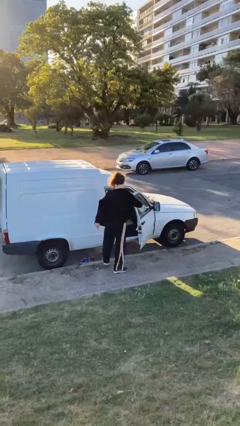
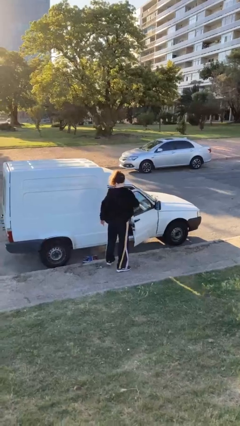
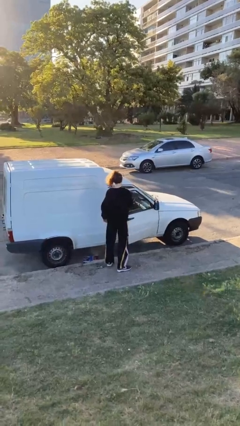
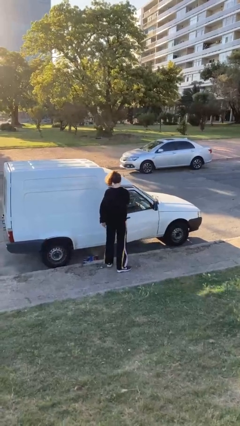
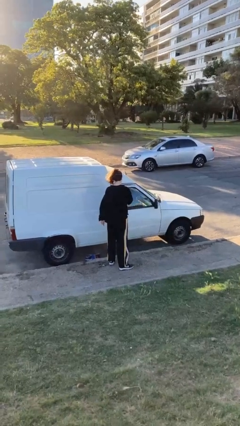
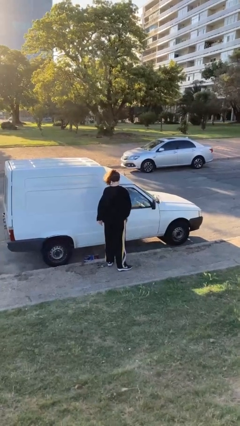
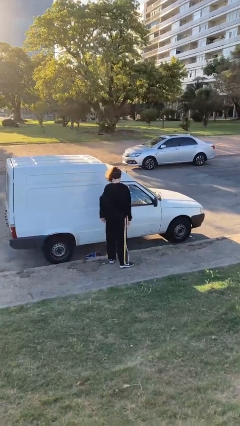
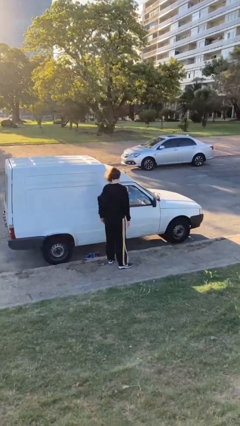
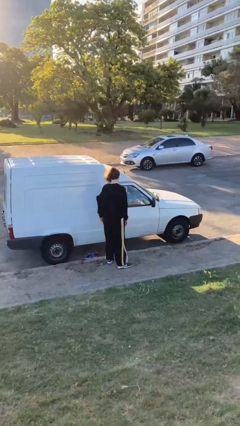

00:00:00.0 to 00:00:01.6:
person closes car door

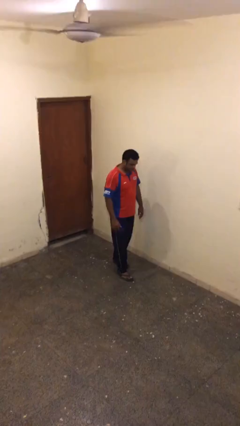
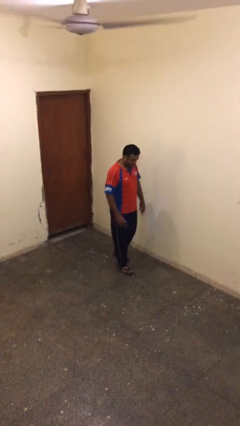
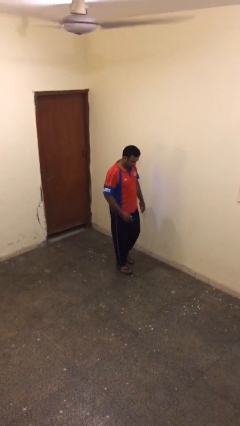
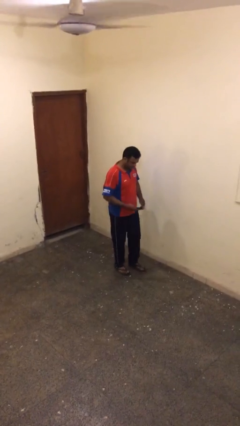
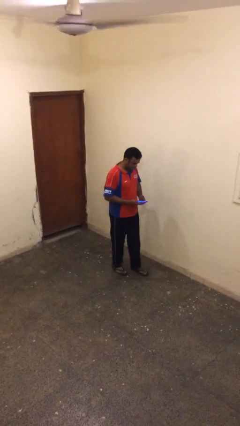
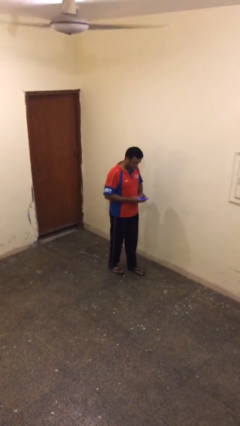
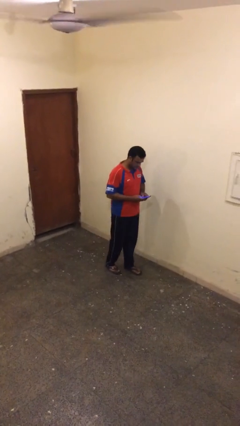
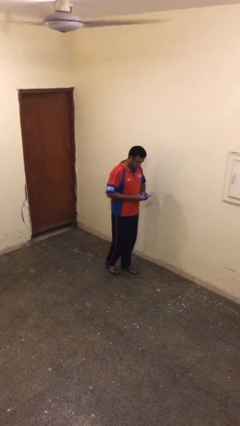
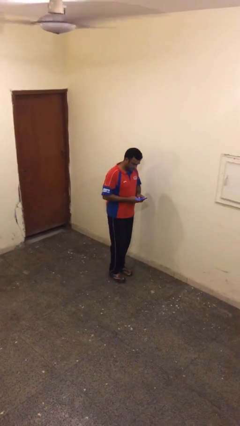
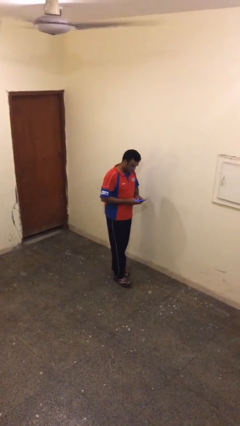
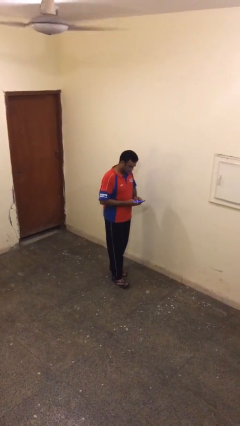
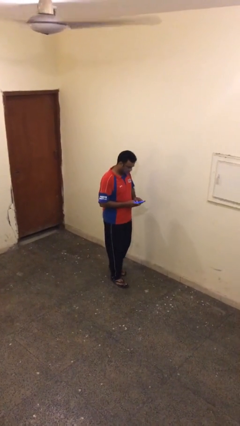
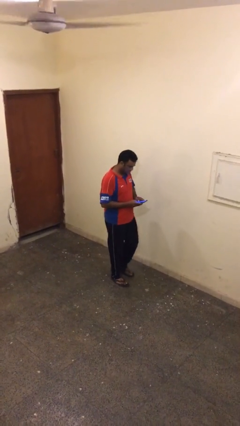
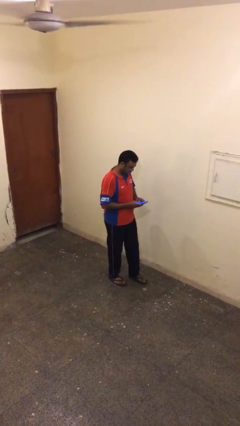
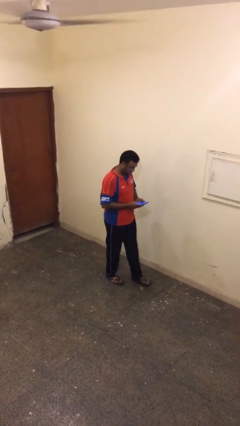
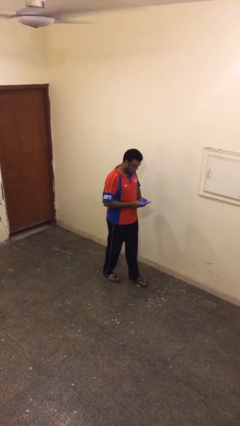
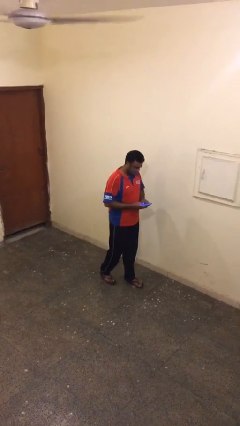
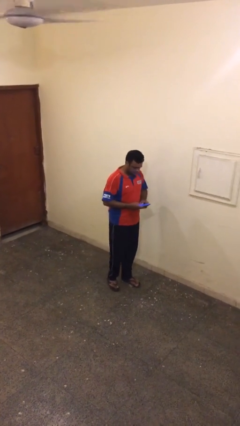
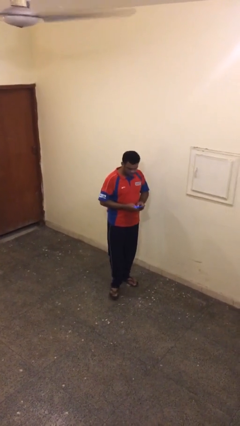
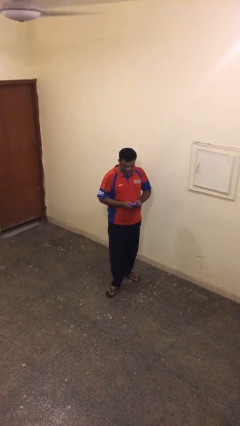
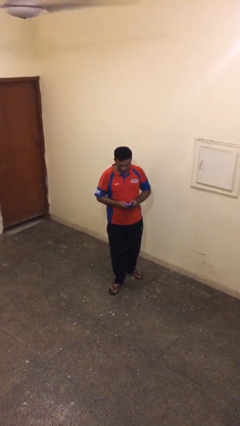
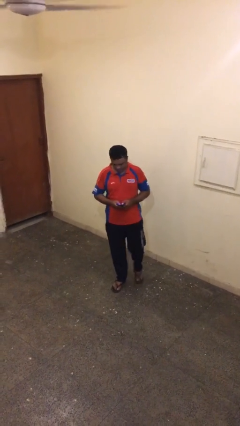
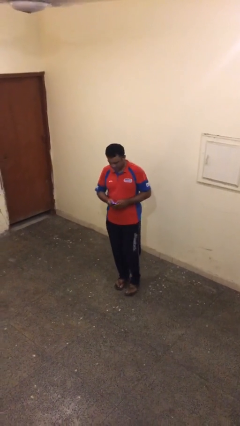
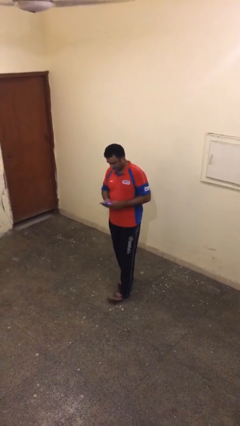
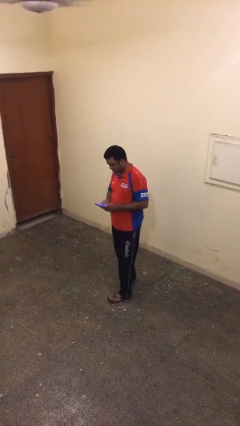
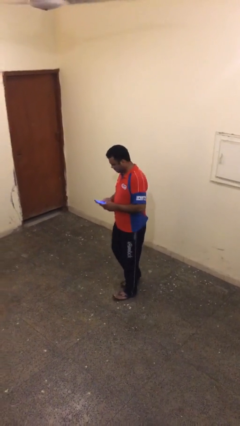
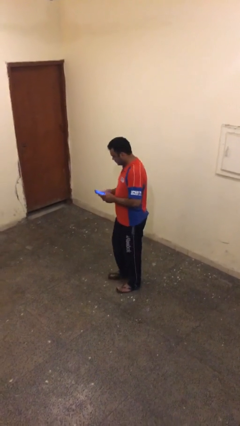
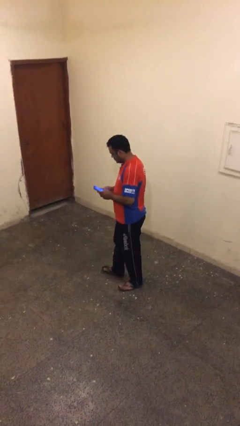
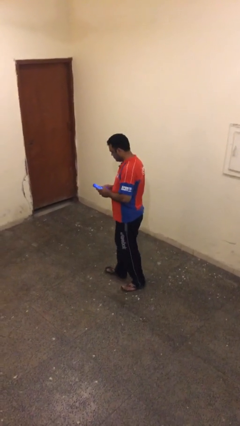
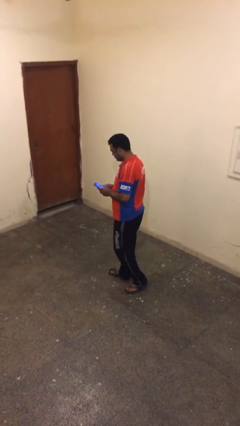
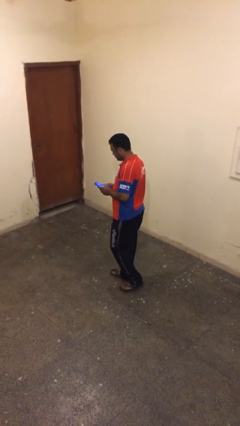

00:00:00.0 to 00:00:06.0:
person texts on phone

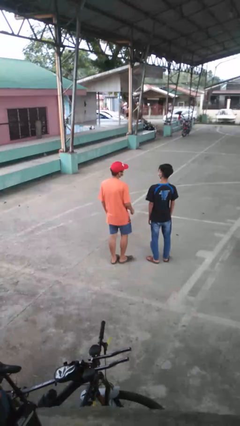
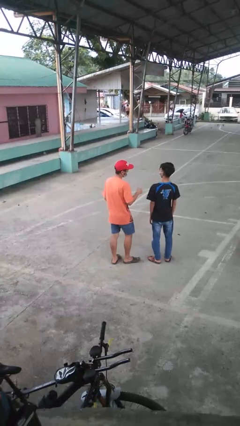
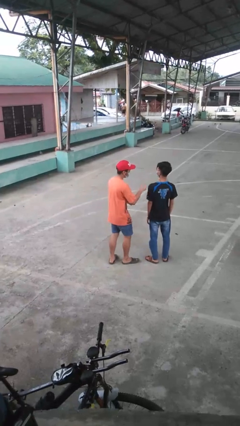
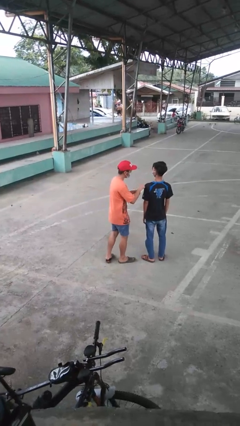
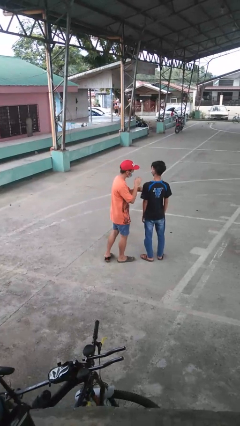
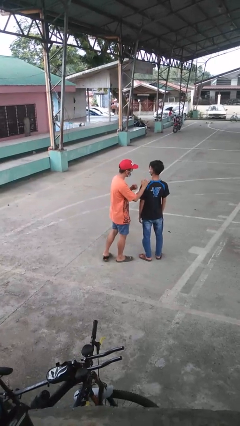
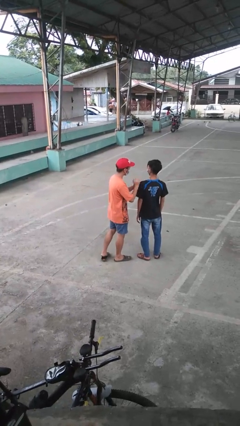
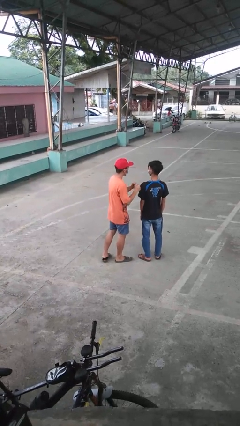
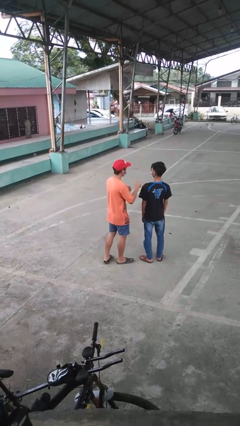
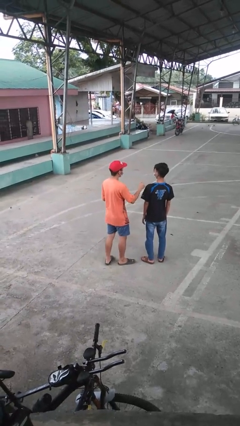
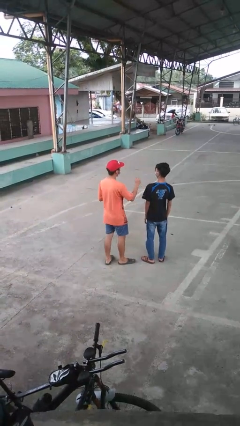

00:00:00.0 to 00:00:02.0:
person pounds shoulders of person

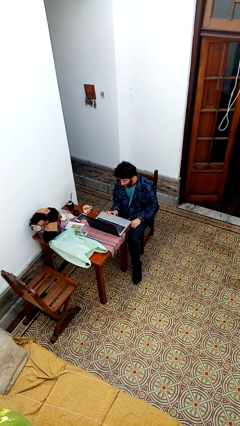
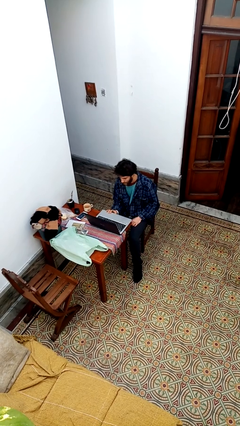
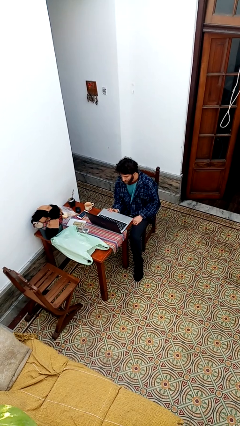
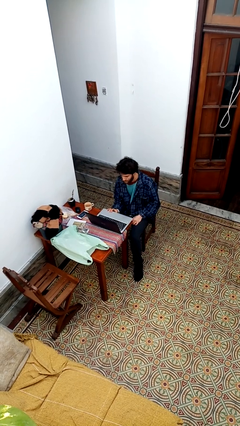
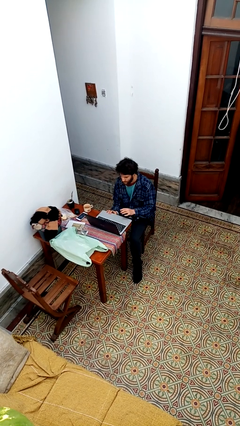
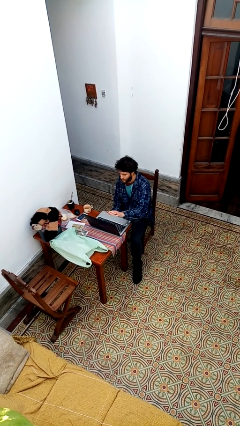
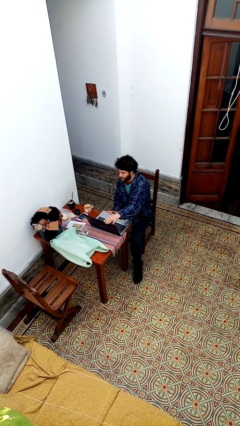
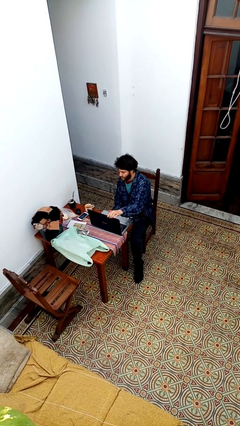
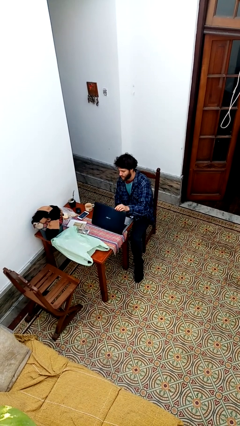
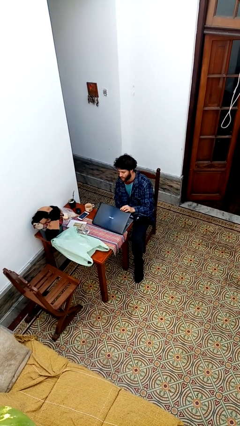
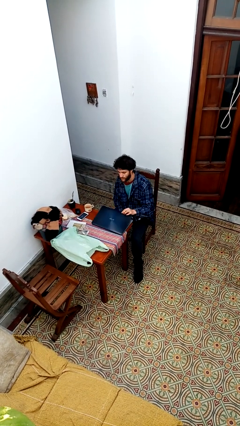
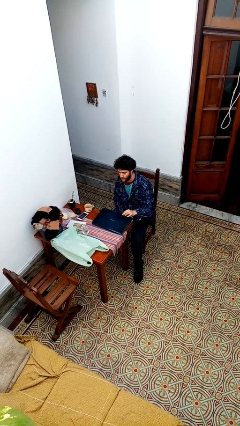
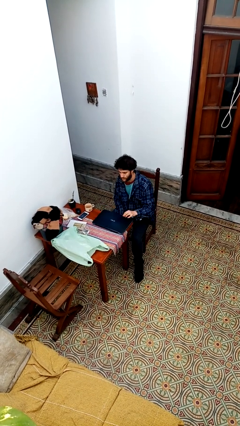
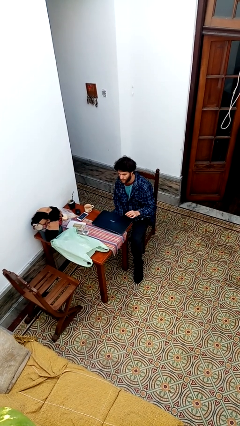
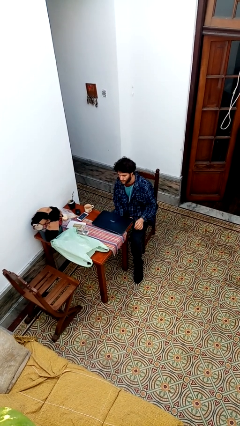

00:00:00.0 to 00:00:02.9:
person closes laptop

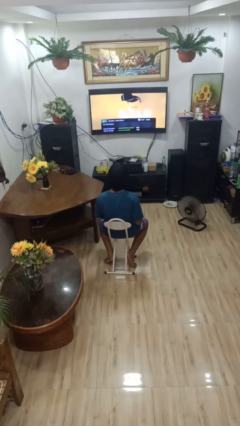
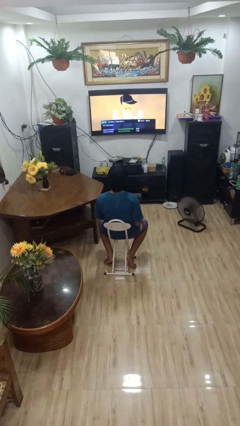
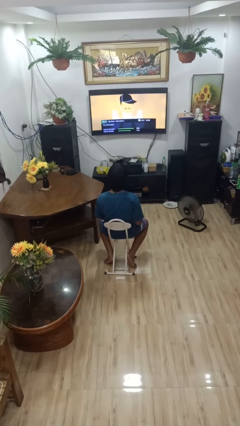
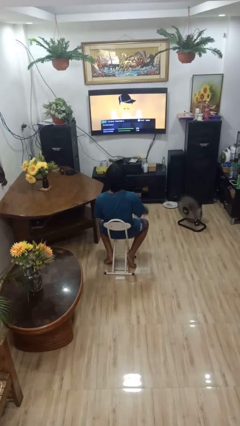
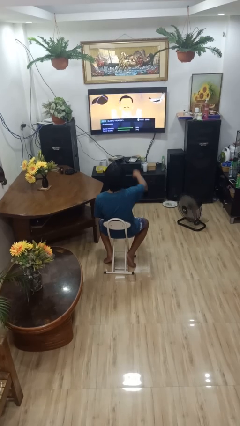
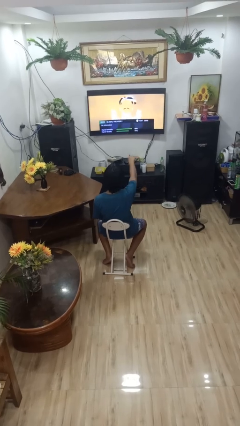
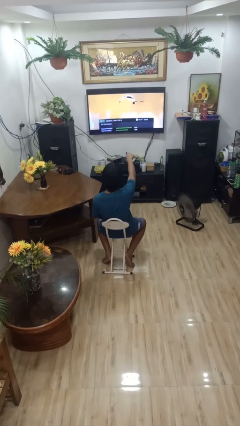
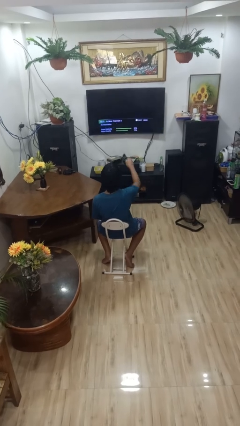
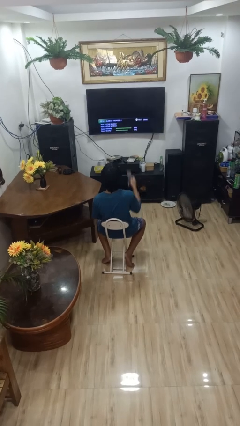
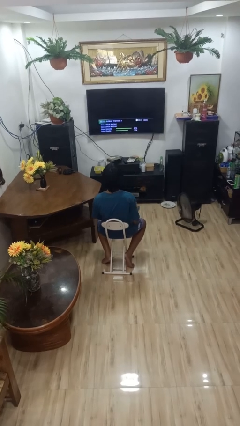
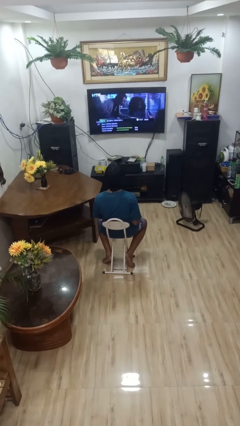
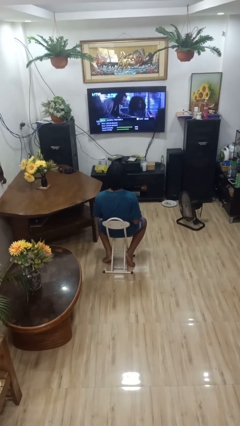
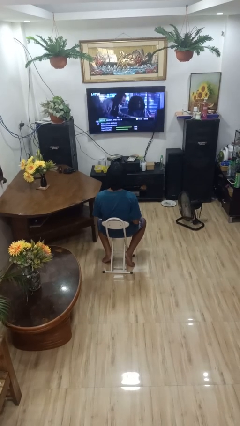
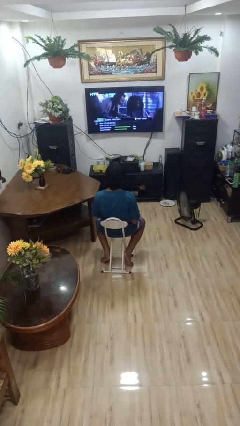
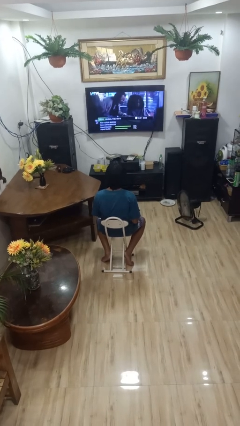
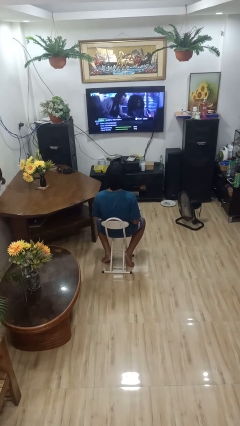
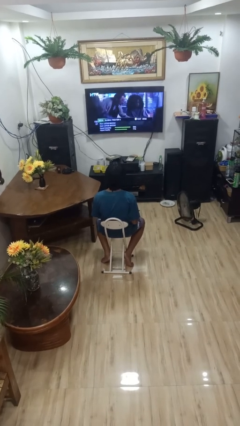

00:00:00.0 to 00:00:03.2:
person uses television remote

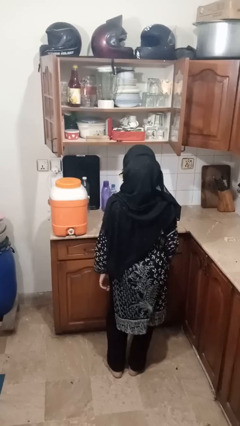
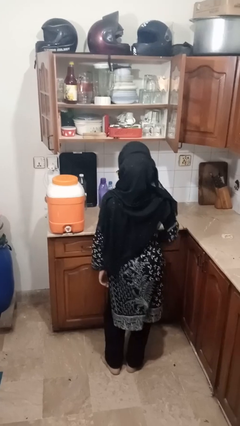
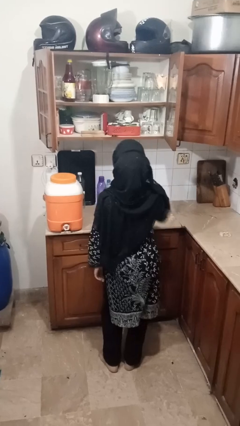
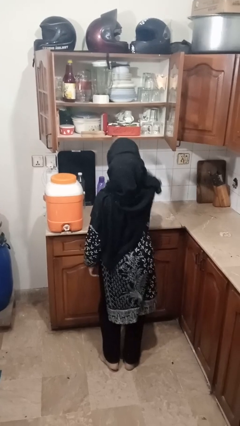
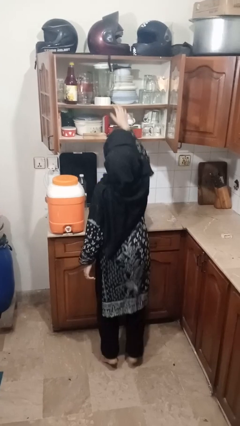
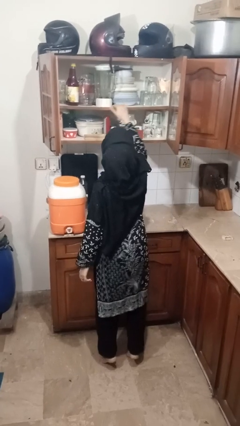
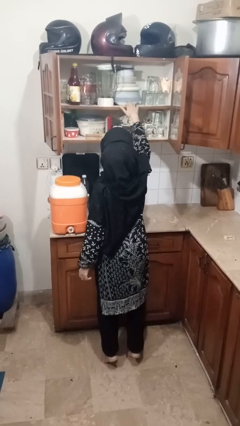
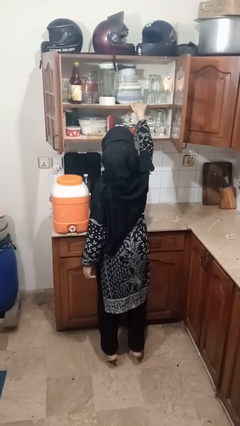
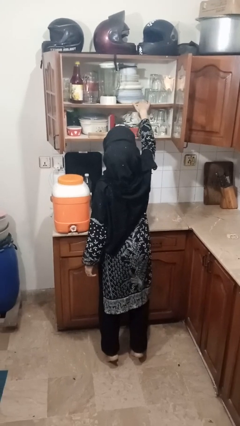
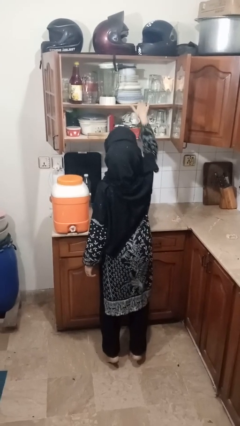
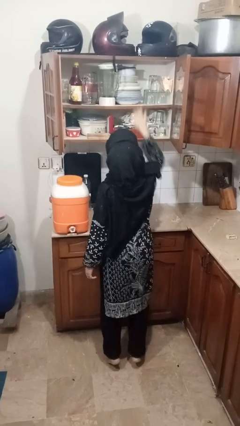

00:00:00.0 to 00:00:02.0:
person searches in cabinet
